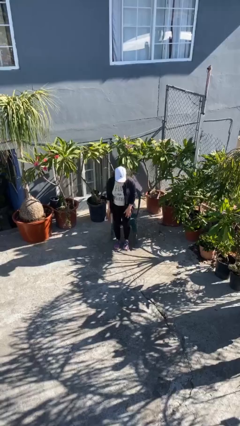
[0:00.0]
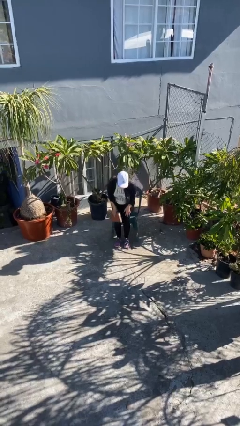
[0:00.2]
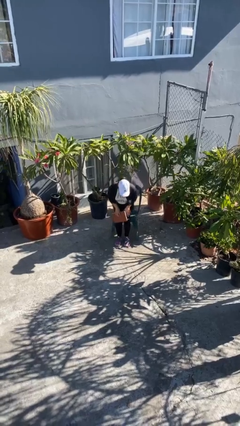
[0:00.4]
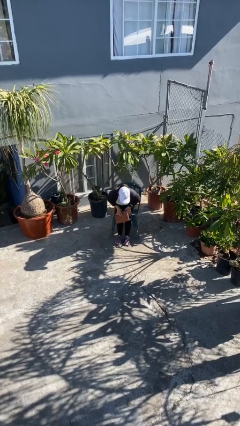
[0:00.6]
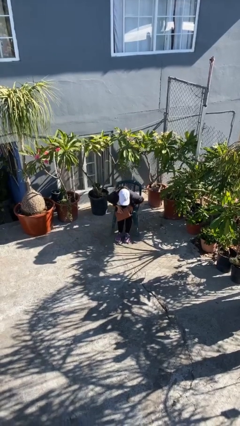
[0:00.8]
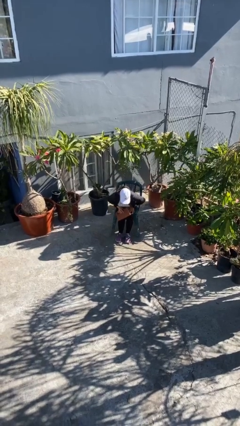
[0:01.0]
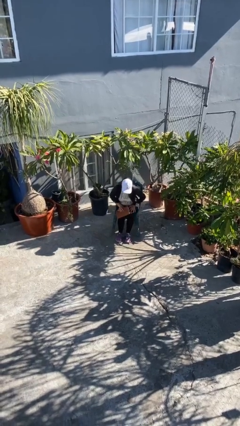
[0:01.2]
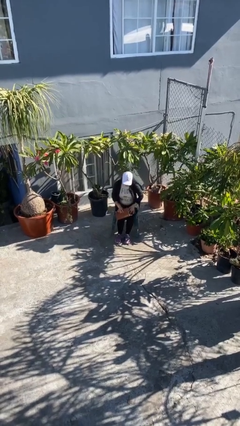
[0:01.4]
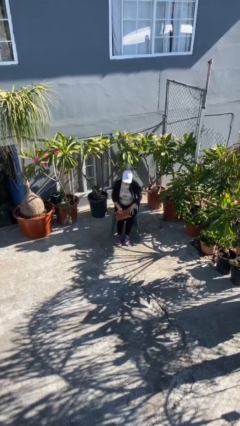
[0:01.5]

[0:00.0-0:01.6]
person sits down

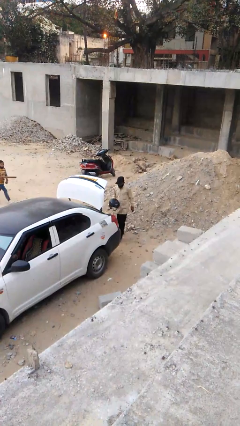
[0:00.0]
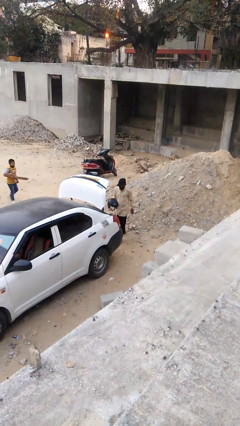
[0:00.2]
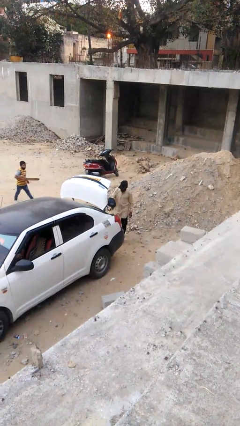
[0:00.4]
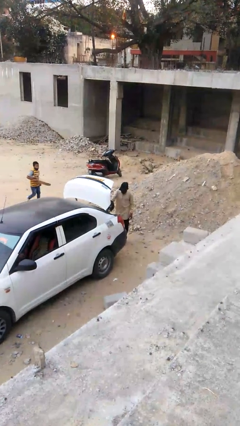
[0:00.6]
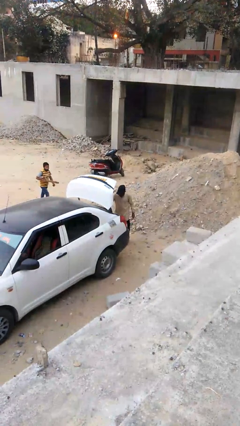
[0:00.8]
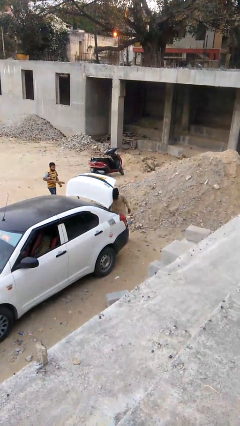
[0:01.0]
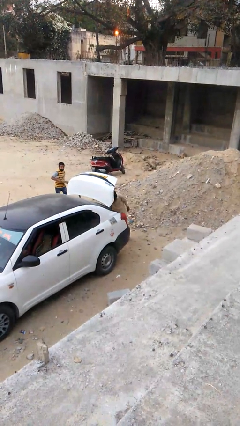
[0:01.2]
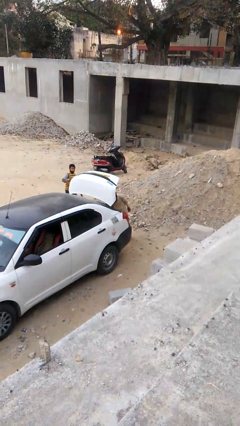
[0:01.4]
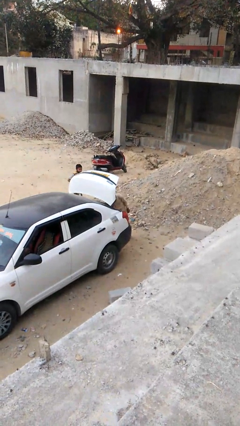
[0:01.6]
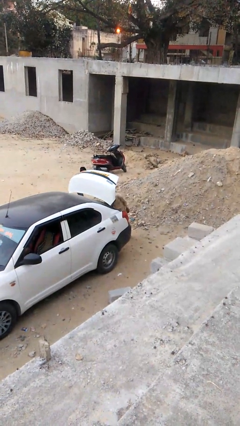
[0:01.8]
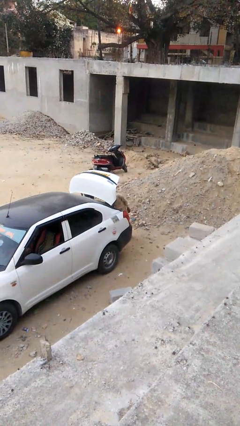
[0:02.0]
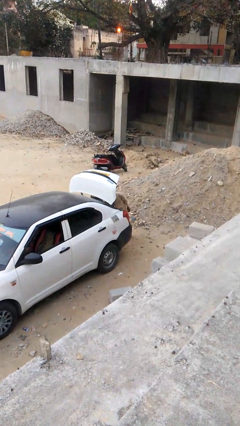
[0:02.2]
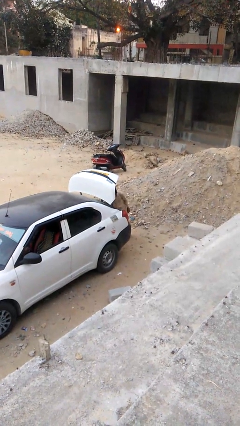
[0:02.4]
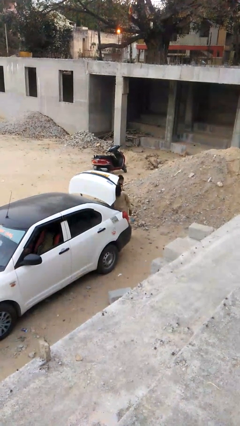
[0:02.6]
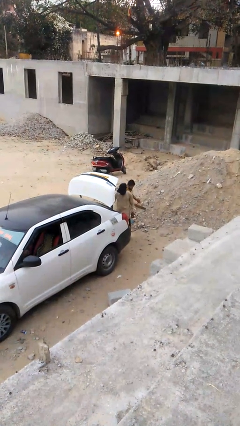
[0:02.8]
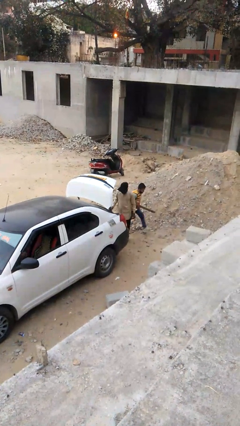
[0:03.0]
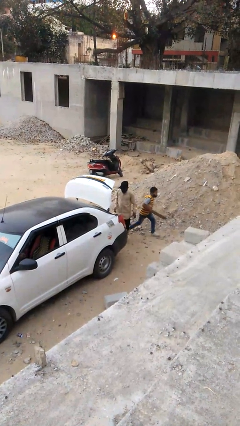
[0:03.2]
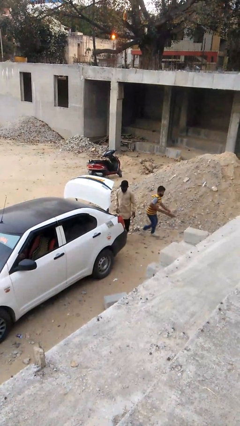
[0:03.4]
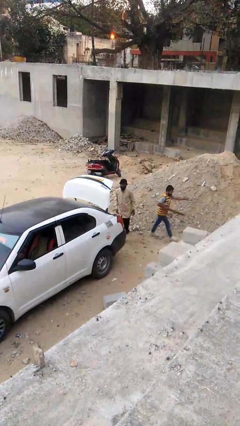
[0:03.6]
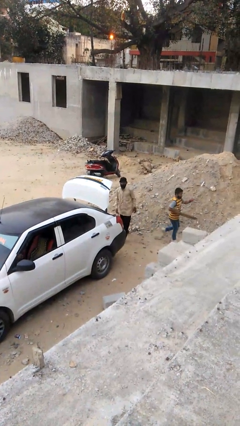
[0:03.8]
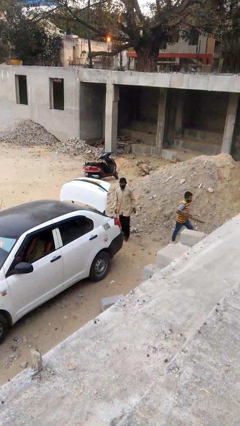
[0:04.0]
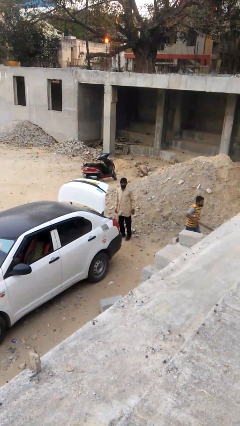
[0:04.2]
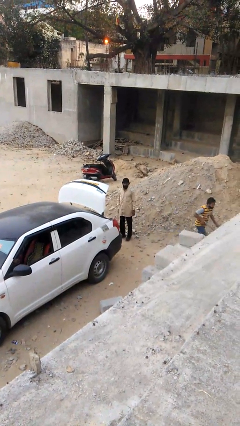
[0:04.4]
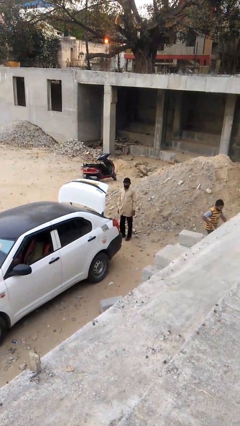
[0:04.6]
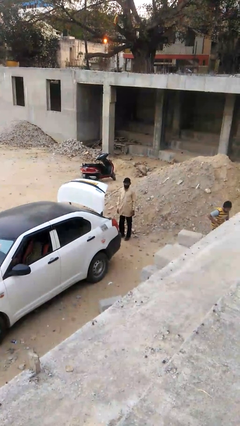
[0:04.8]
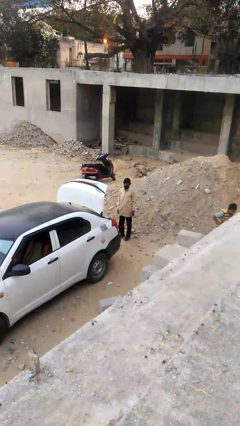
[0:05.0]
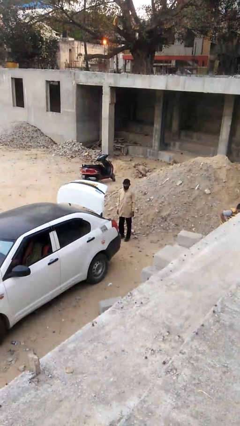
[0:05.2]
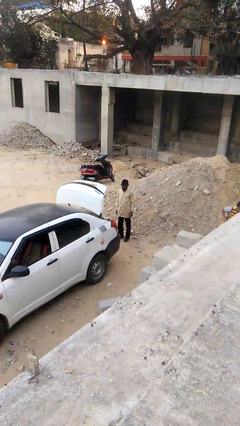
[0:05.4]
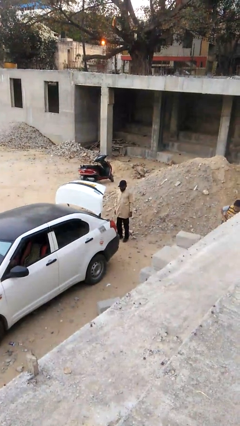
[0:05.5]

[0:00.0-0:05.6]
person loads car

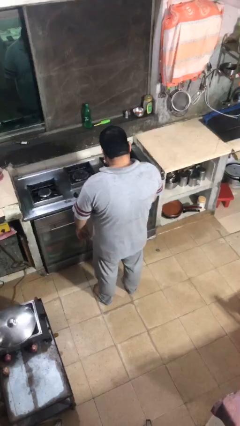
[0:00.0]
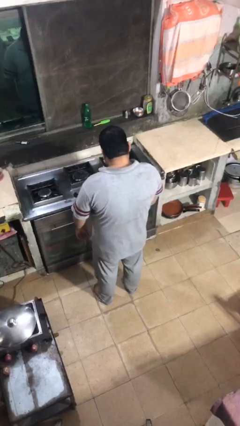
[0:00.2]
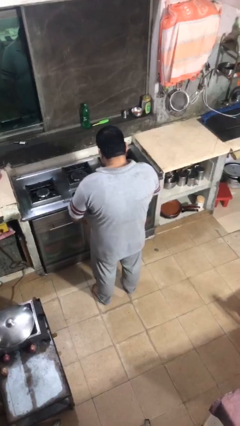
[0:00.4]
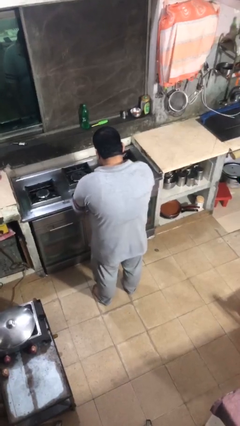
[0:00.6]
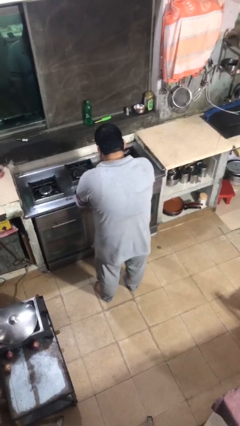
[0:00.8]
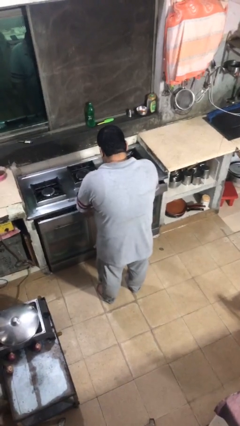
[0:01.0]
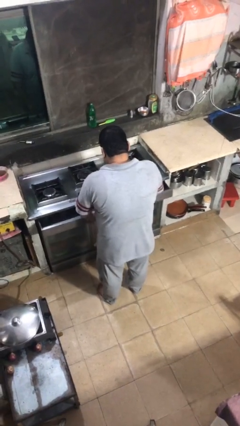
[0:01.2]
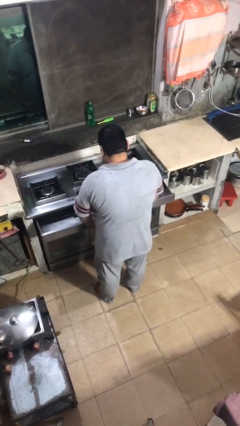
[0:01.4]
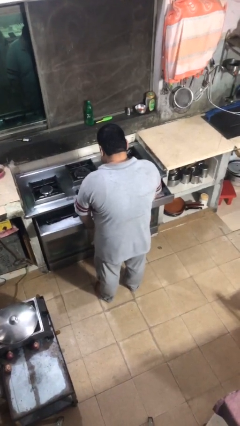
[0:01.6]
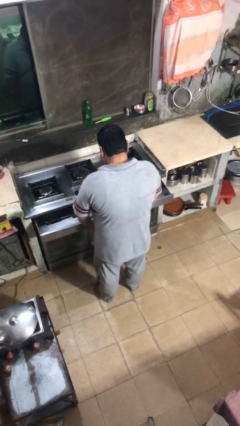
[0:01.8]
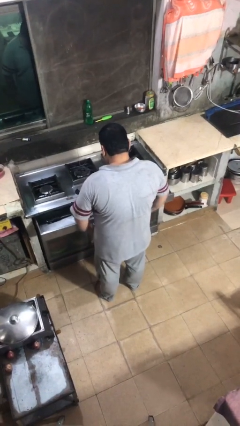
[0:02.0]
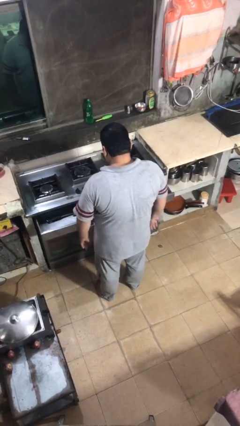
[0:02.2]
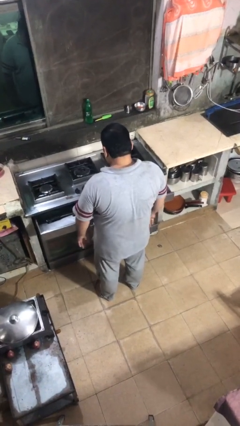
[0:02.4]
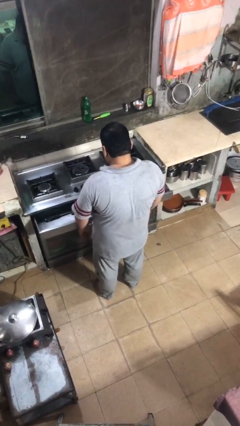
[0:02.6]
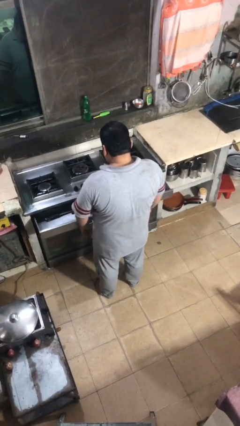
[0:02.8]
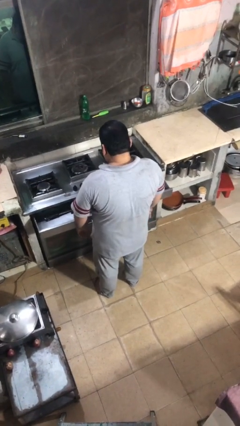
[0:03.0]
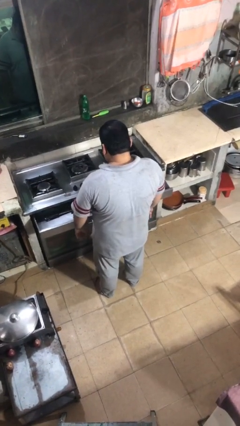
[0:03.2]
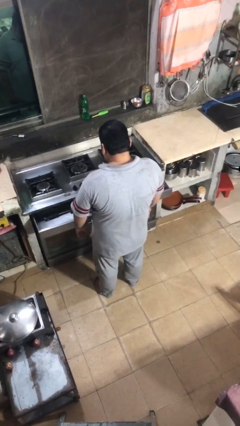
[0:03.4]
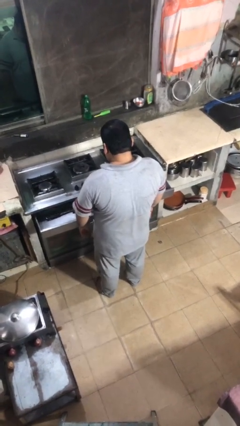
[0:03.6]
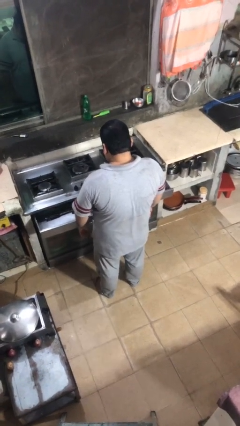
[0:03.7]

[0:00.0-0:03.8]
person opens kitchen drawer

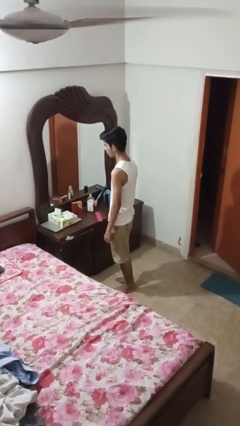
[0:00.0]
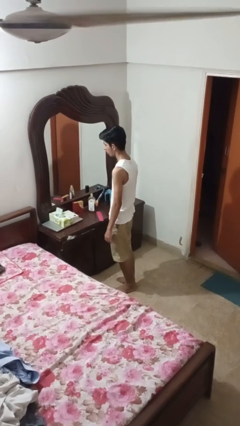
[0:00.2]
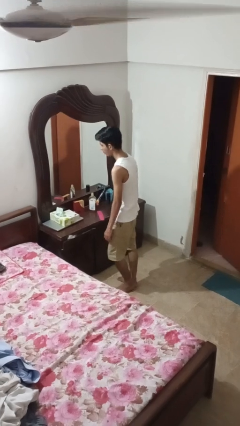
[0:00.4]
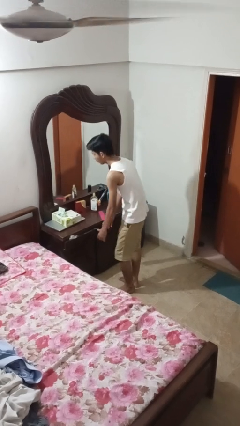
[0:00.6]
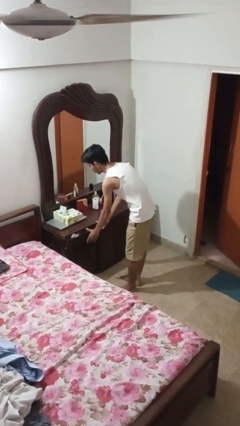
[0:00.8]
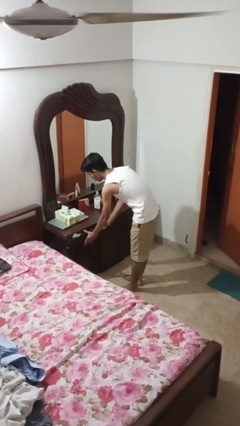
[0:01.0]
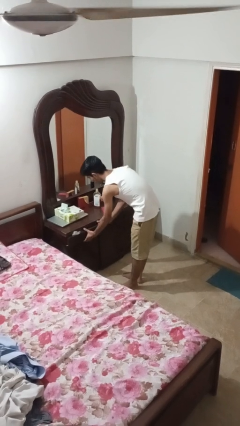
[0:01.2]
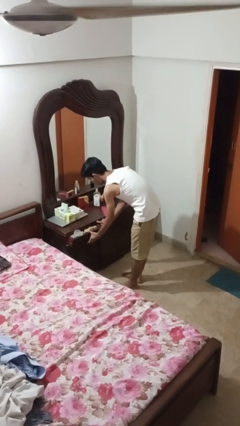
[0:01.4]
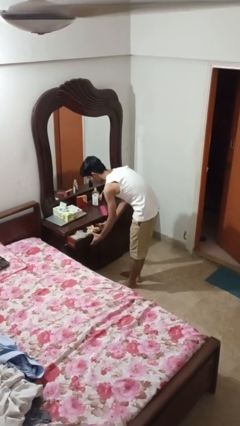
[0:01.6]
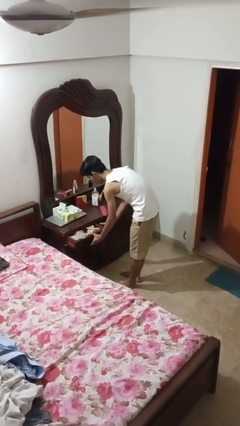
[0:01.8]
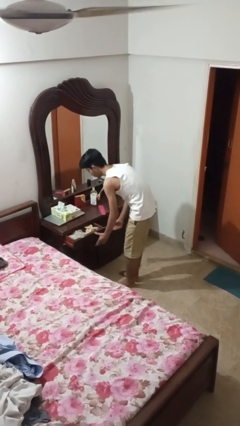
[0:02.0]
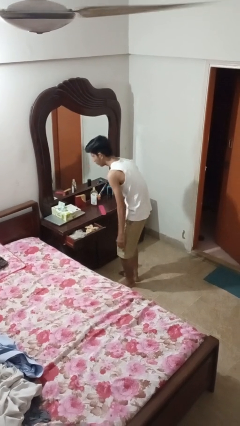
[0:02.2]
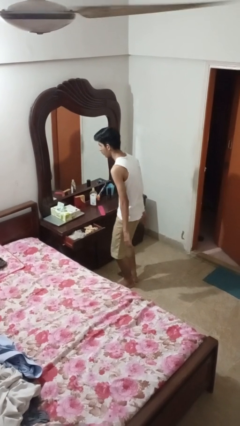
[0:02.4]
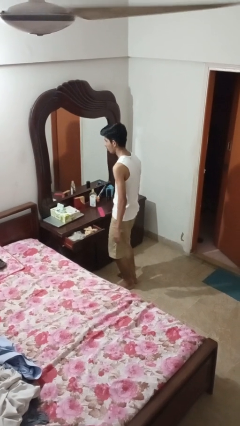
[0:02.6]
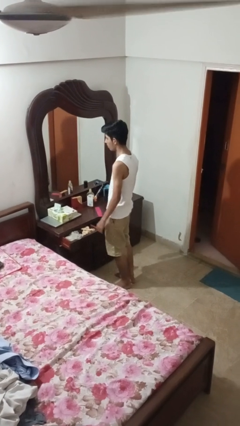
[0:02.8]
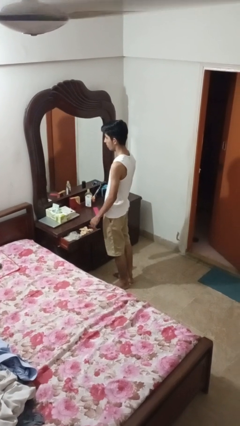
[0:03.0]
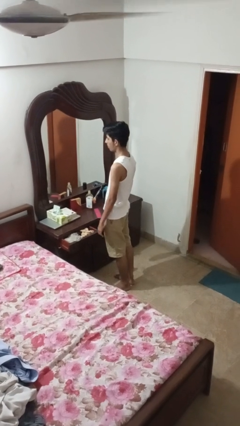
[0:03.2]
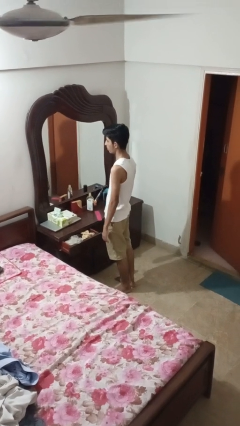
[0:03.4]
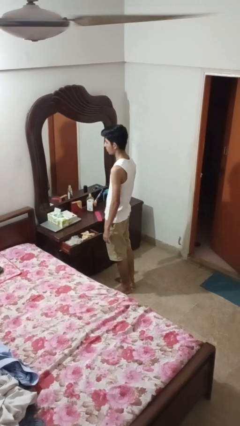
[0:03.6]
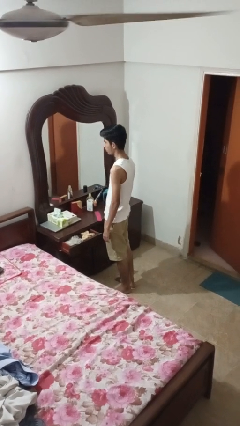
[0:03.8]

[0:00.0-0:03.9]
person opens dresser drawer

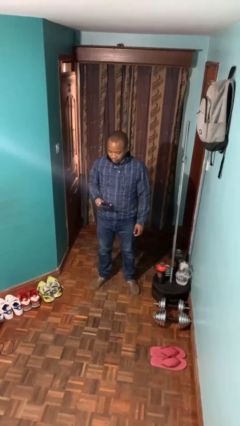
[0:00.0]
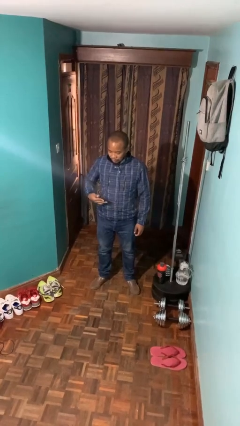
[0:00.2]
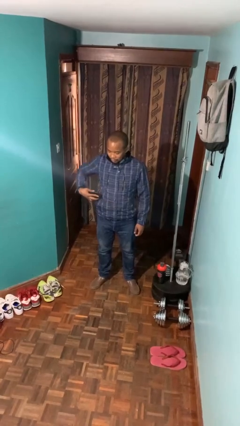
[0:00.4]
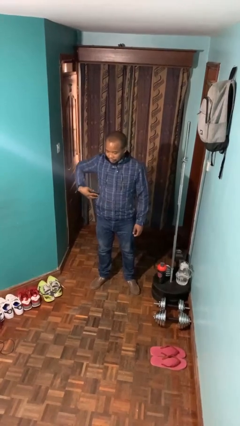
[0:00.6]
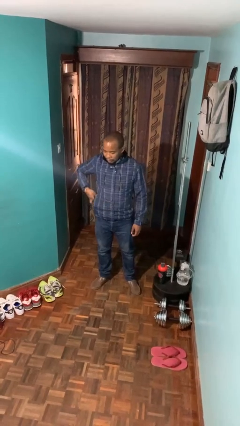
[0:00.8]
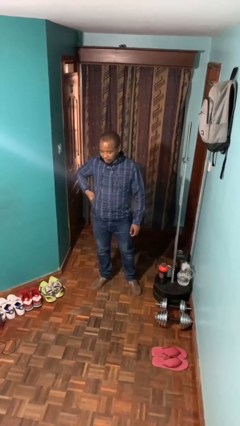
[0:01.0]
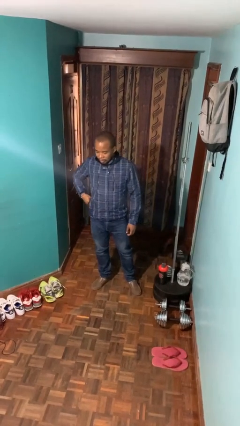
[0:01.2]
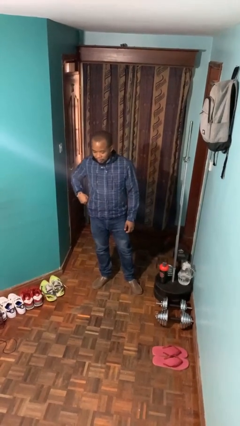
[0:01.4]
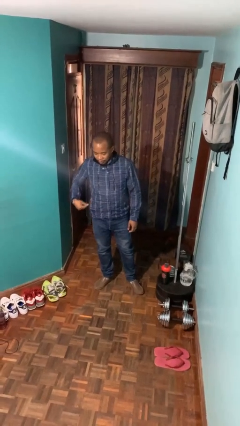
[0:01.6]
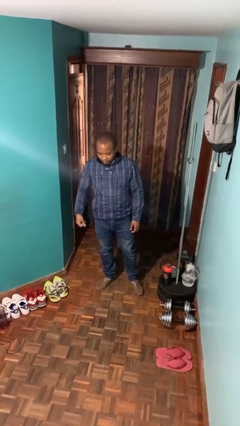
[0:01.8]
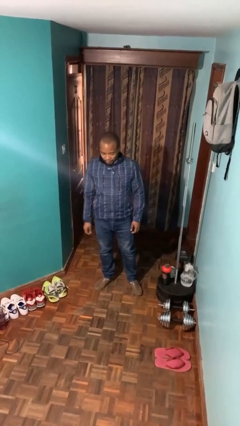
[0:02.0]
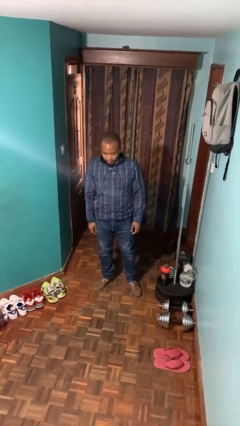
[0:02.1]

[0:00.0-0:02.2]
person puts phone into pocket

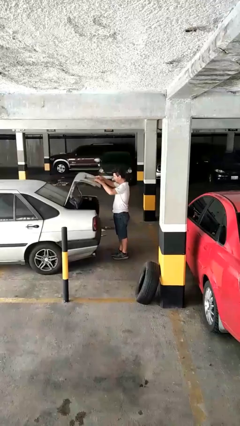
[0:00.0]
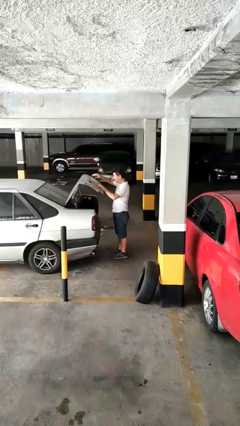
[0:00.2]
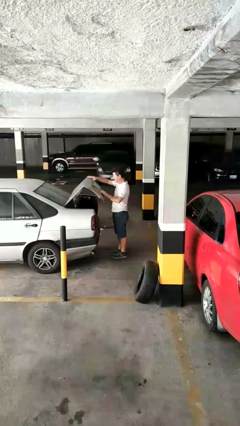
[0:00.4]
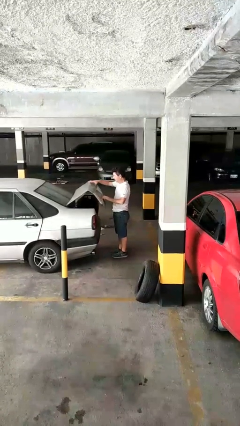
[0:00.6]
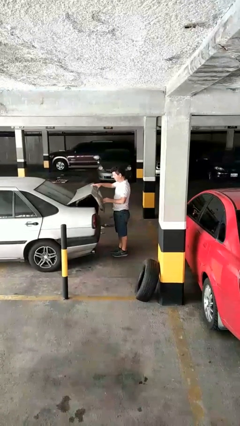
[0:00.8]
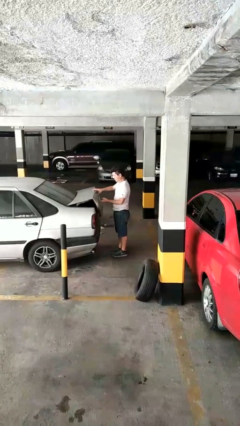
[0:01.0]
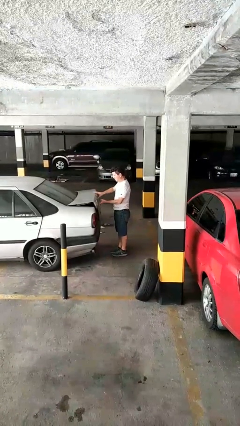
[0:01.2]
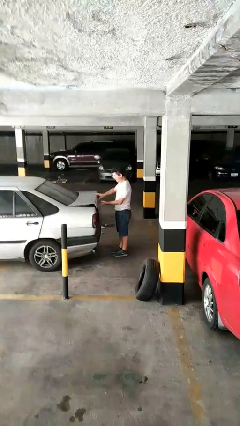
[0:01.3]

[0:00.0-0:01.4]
person closes car trunk
